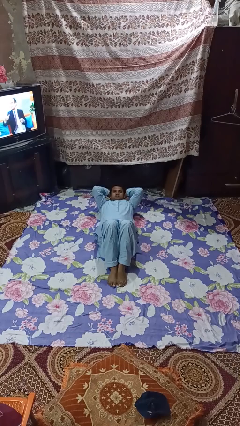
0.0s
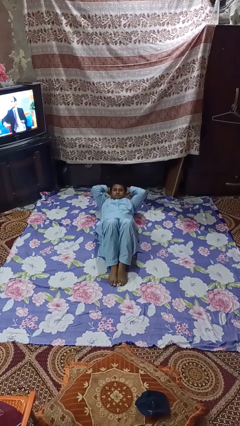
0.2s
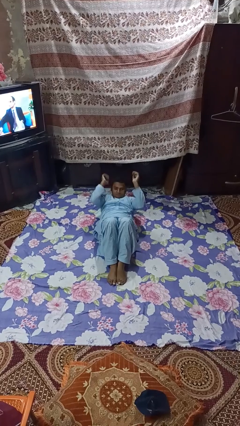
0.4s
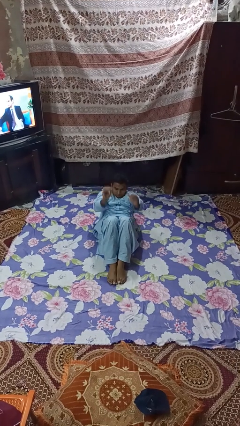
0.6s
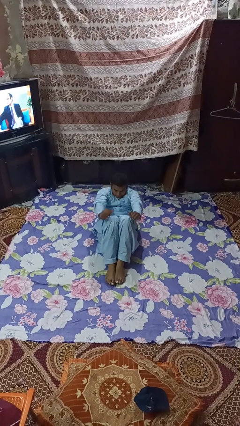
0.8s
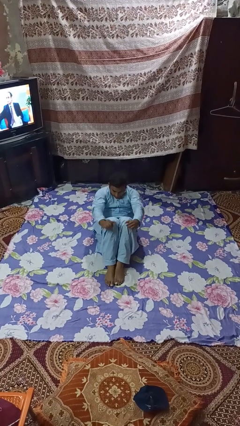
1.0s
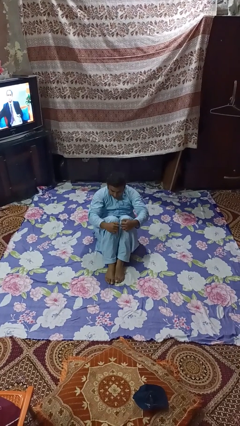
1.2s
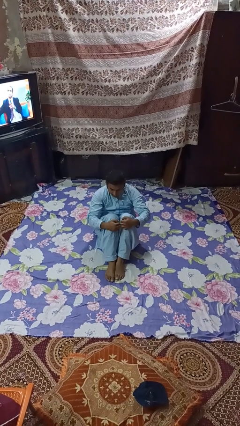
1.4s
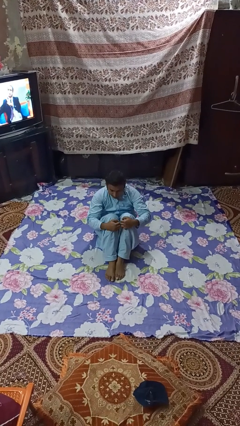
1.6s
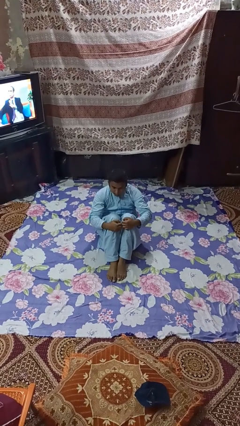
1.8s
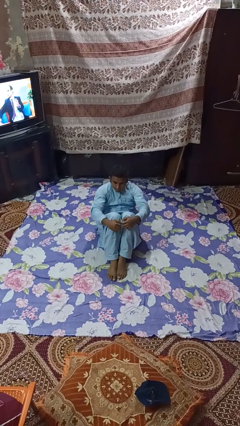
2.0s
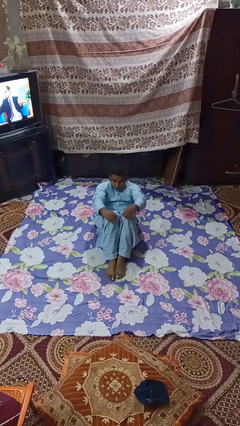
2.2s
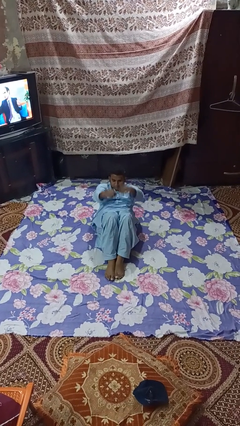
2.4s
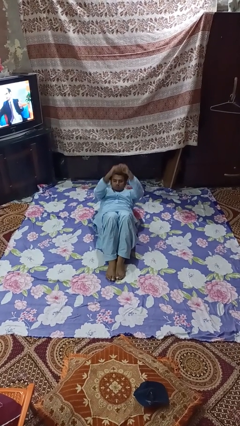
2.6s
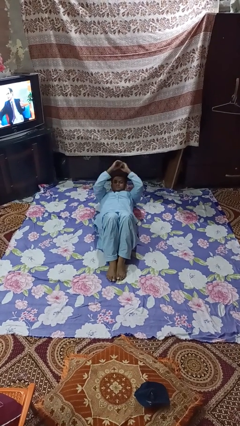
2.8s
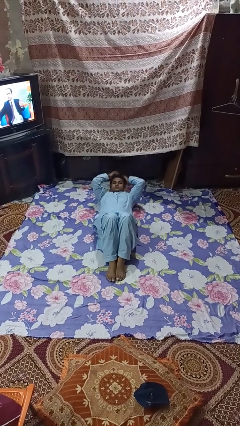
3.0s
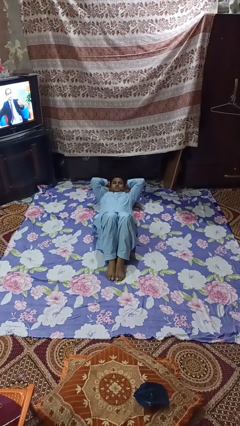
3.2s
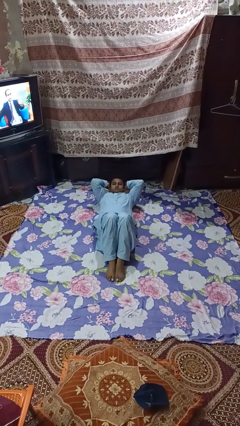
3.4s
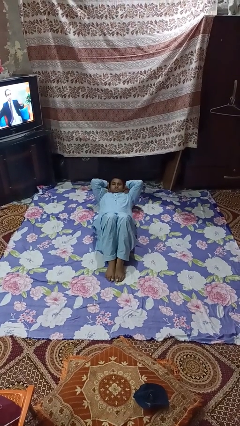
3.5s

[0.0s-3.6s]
person exercises with situp

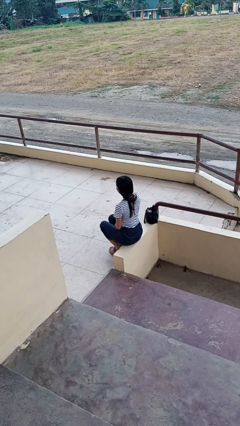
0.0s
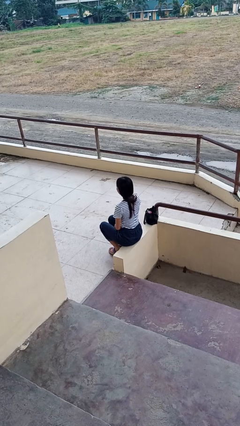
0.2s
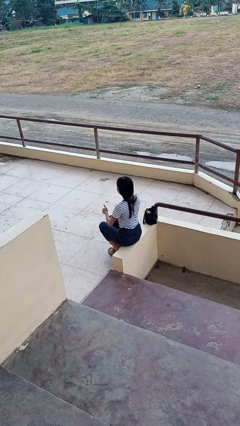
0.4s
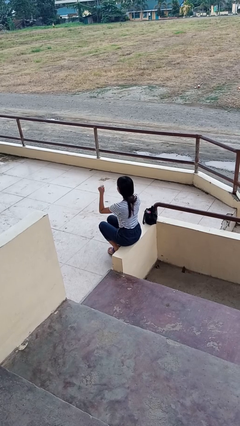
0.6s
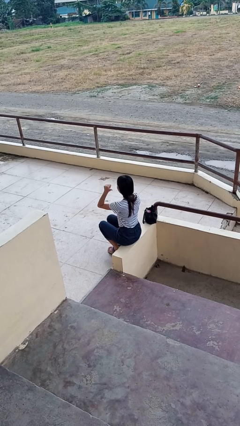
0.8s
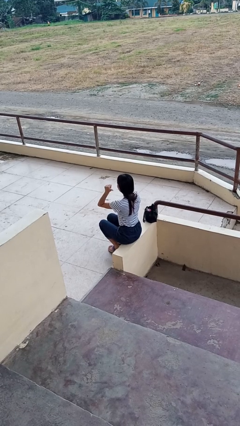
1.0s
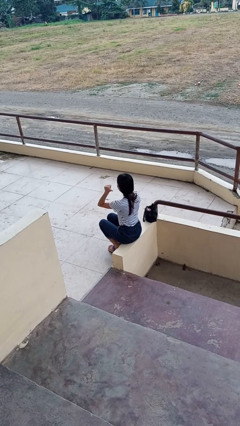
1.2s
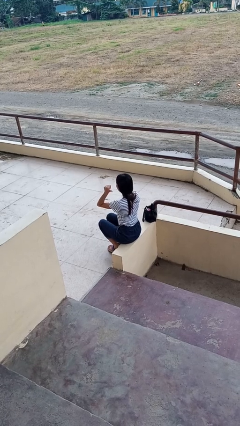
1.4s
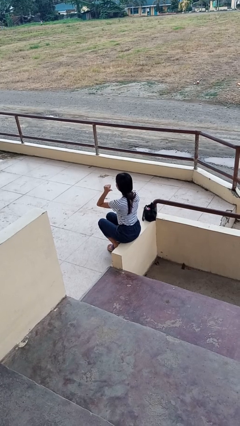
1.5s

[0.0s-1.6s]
person gestures behind me

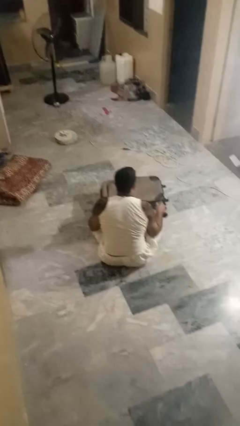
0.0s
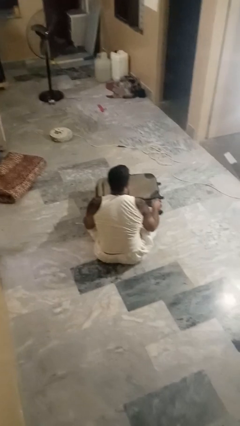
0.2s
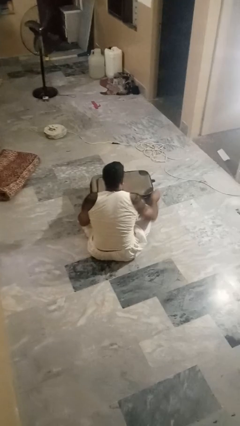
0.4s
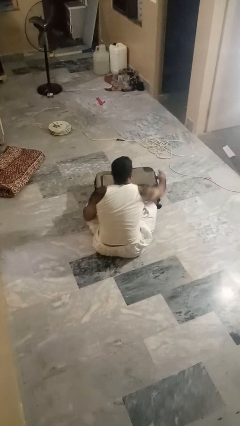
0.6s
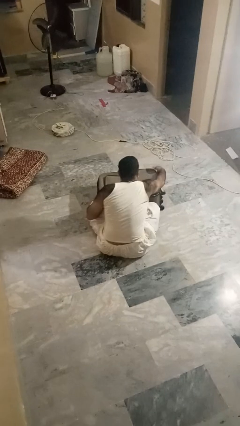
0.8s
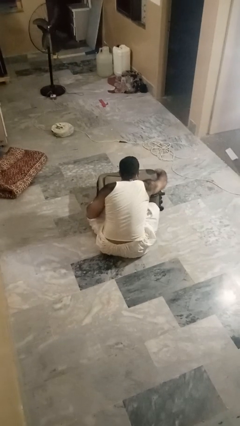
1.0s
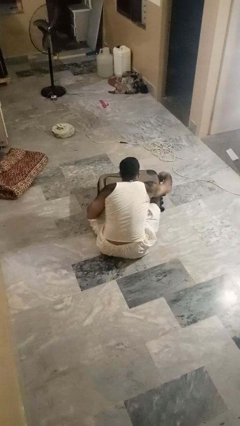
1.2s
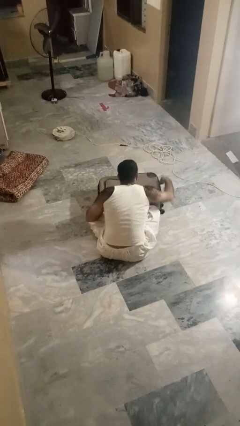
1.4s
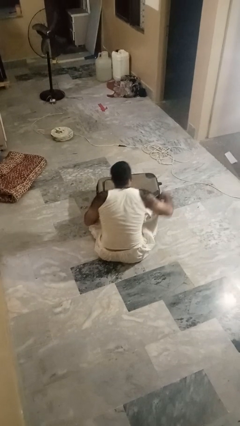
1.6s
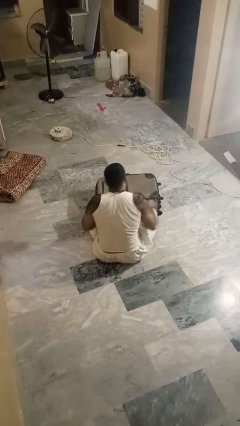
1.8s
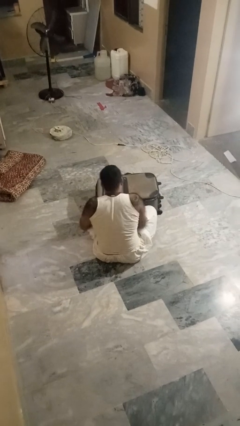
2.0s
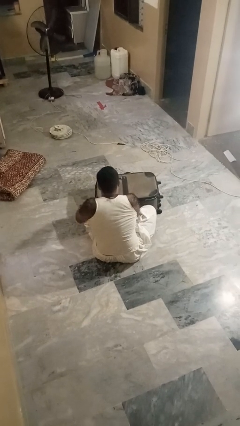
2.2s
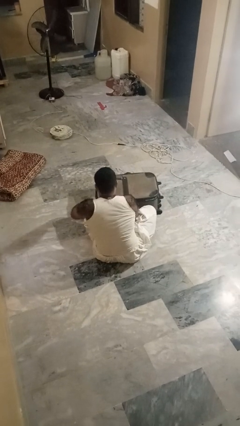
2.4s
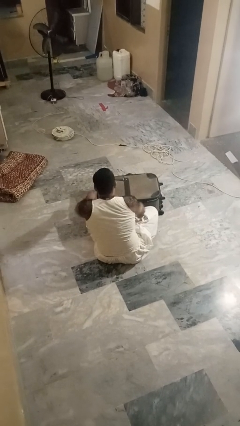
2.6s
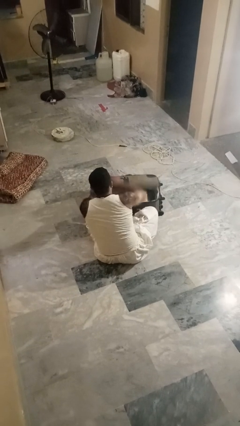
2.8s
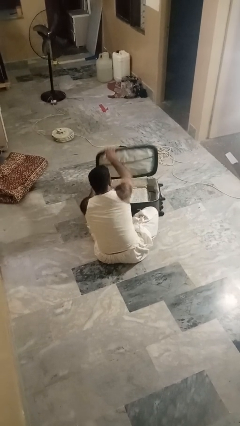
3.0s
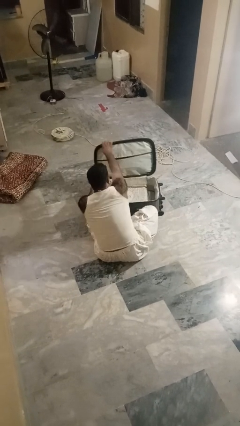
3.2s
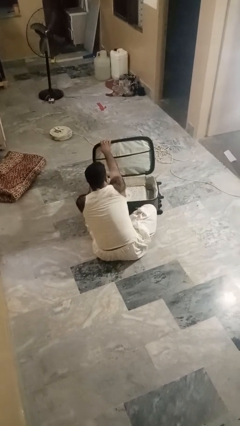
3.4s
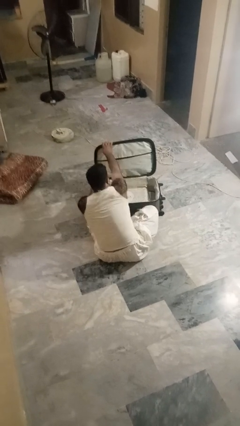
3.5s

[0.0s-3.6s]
person opens suitcase

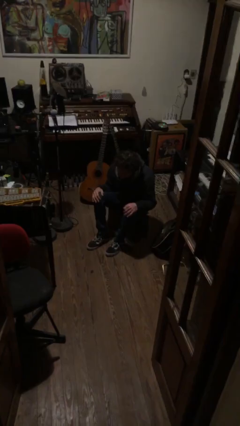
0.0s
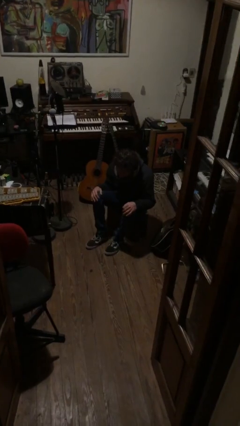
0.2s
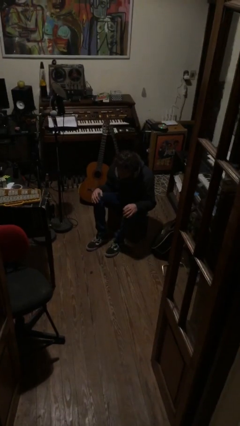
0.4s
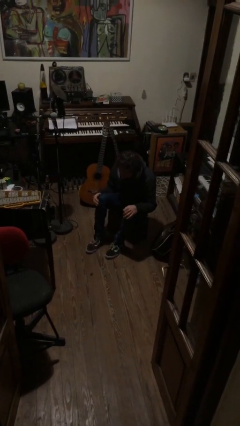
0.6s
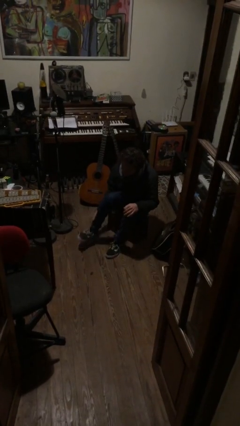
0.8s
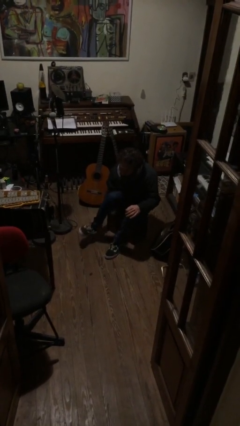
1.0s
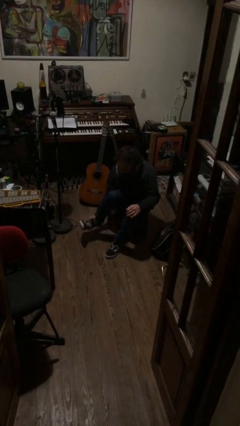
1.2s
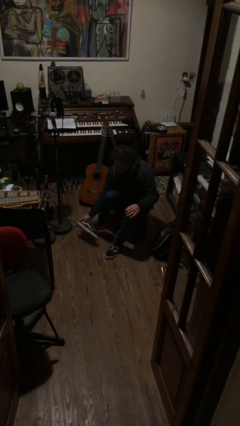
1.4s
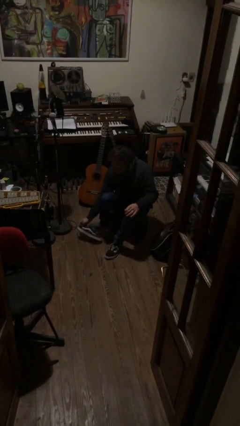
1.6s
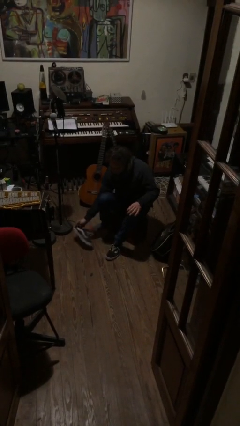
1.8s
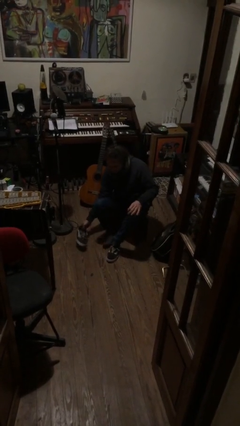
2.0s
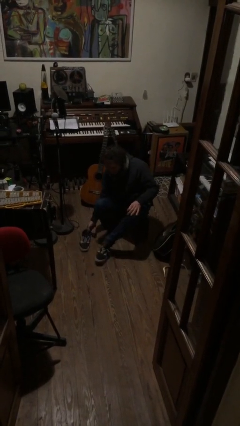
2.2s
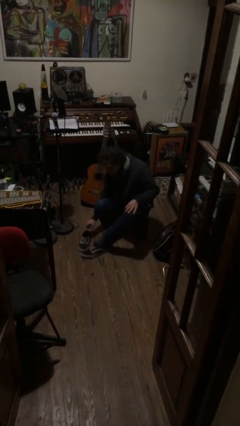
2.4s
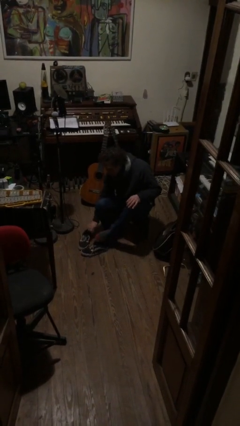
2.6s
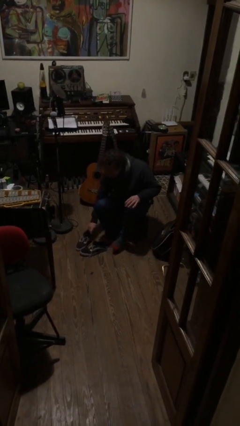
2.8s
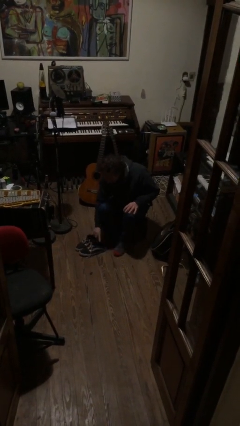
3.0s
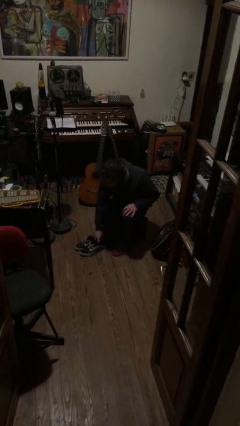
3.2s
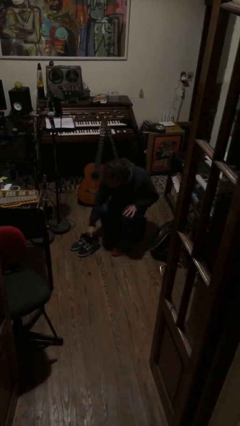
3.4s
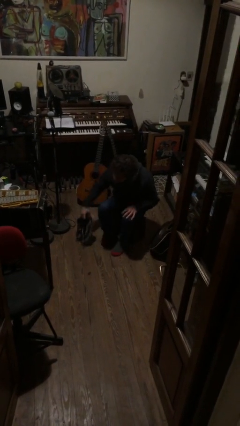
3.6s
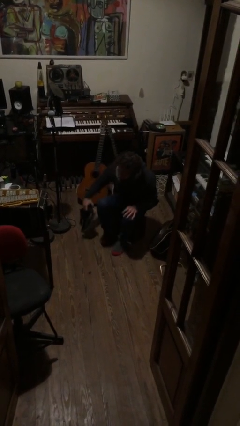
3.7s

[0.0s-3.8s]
person takes off shoes

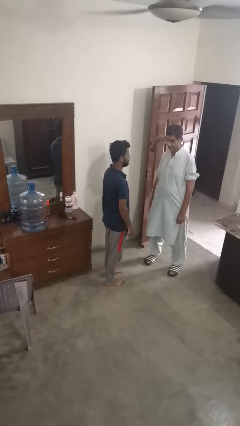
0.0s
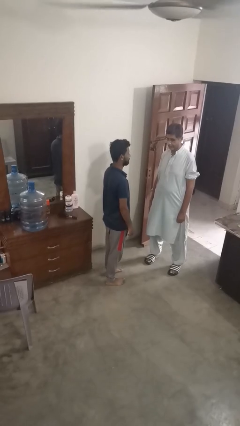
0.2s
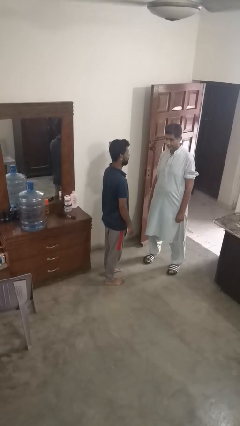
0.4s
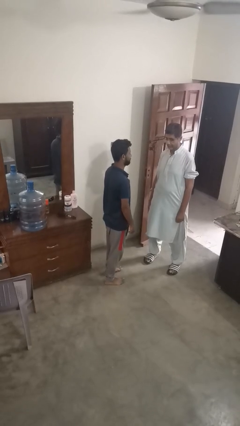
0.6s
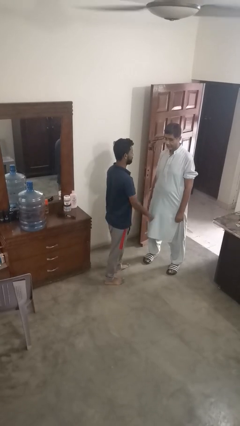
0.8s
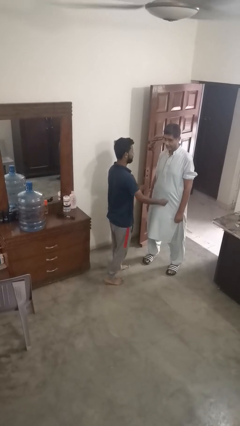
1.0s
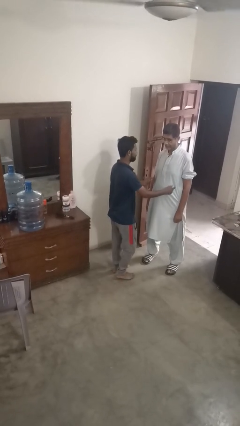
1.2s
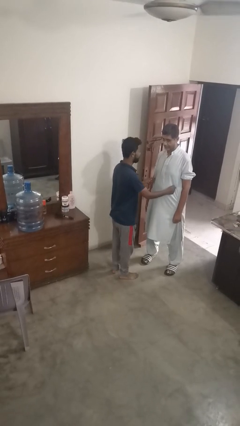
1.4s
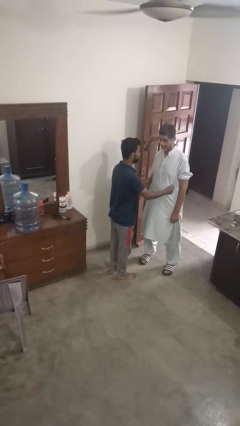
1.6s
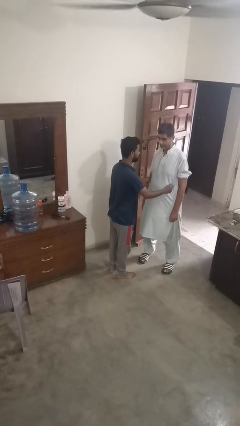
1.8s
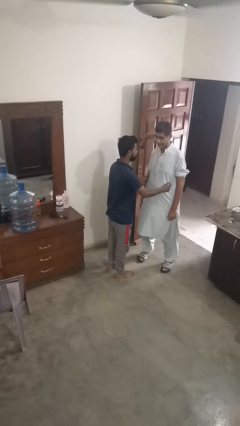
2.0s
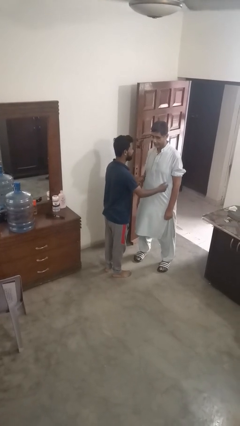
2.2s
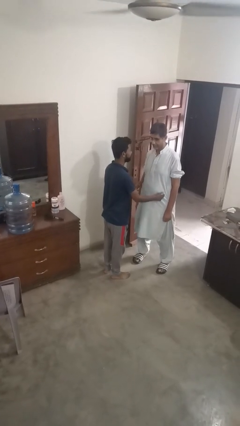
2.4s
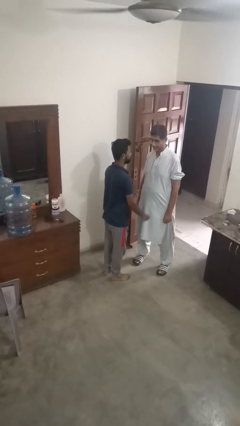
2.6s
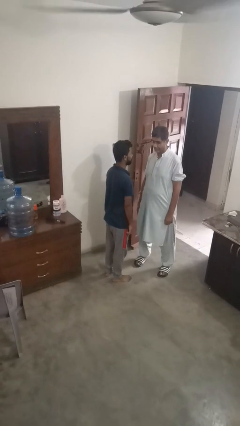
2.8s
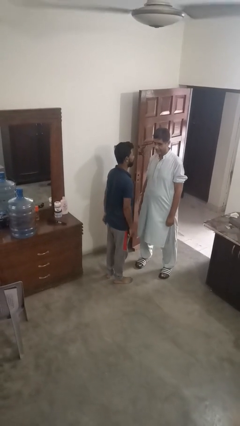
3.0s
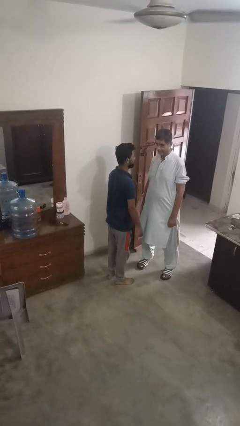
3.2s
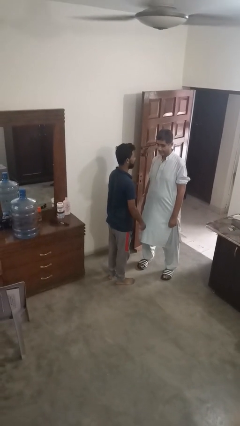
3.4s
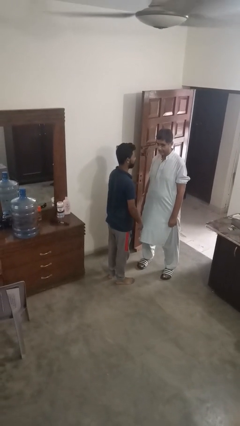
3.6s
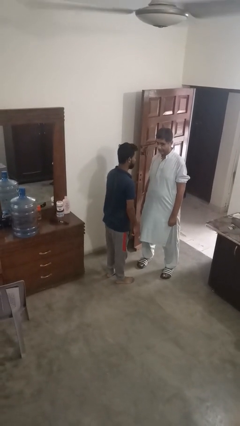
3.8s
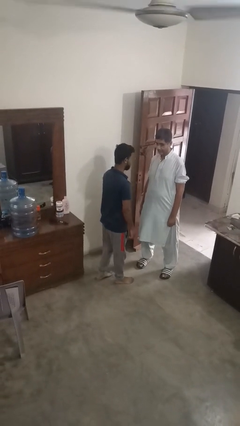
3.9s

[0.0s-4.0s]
person tickles person

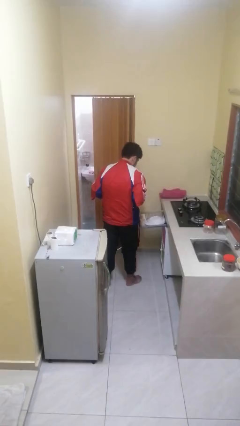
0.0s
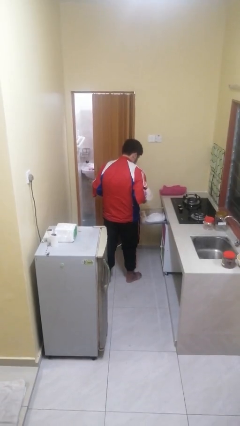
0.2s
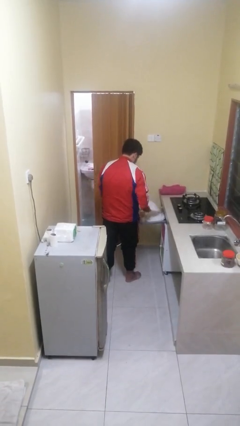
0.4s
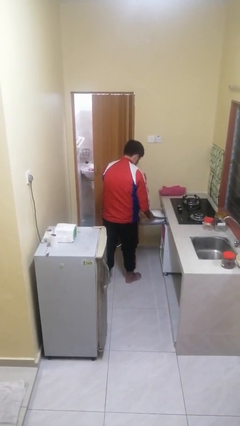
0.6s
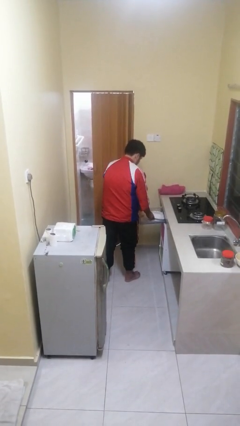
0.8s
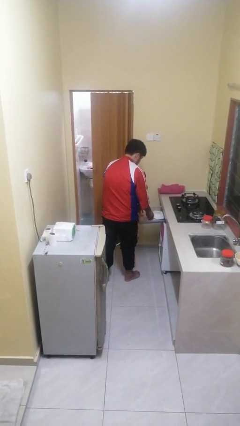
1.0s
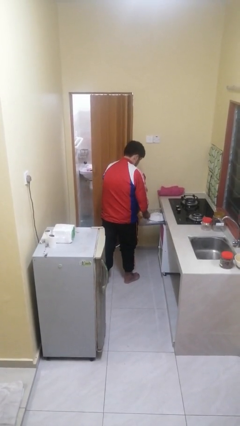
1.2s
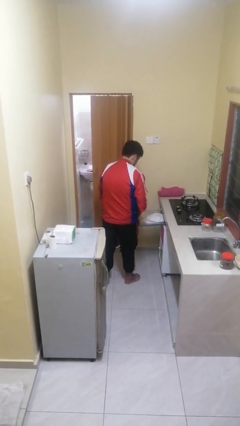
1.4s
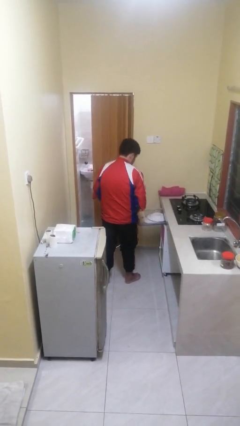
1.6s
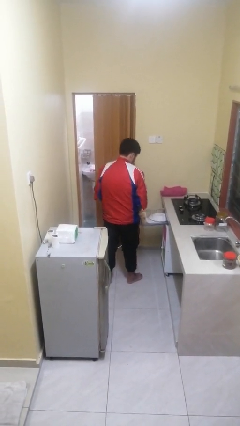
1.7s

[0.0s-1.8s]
person puts object into kitchen drawer
